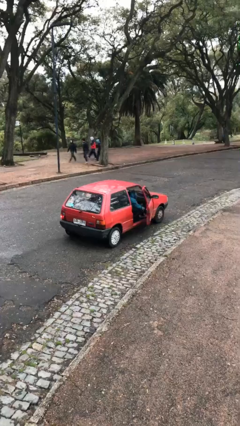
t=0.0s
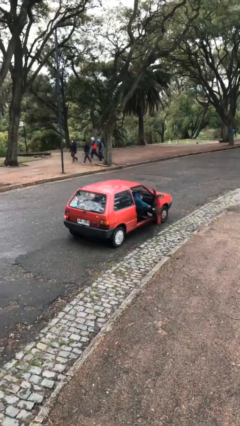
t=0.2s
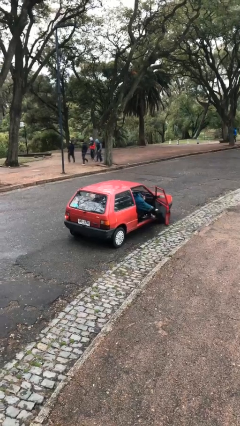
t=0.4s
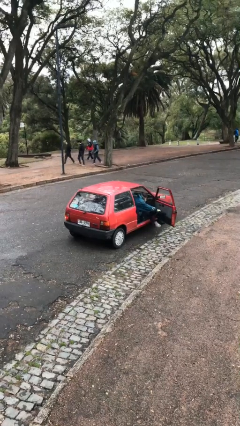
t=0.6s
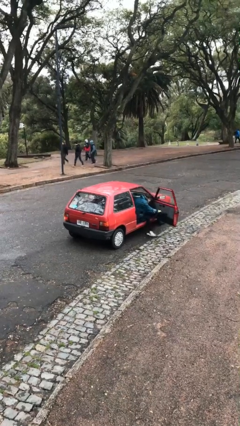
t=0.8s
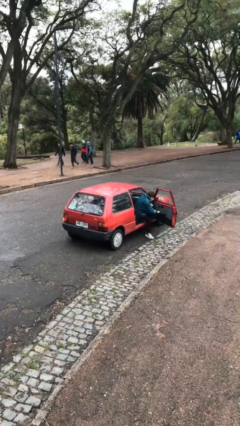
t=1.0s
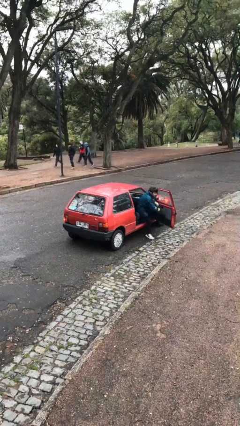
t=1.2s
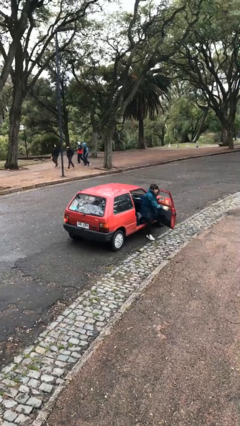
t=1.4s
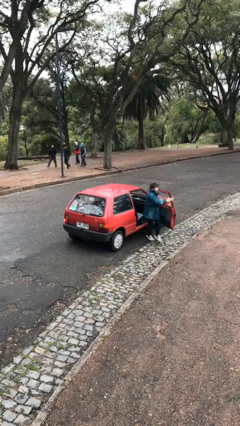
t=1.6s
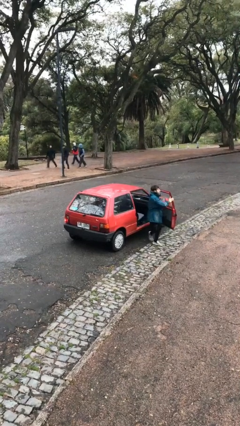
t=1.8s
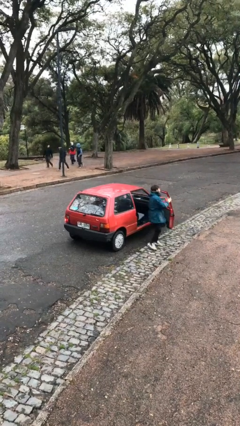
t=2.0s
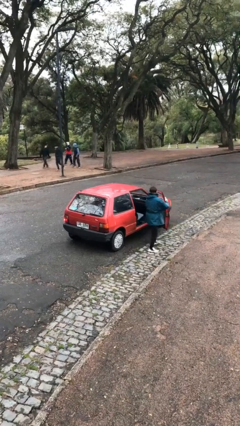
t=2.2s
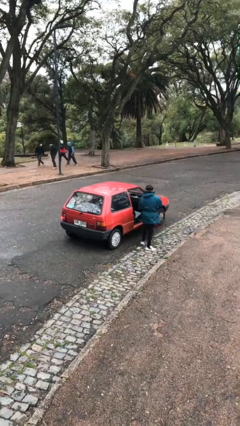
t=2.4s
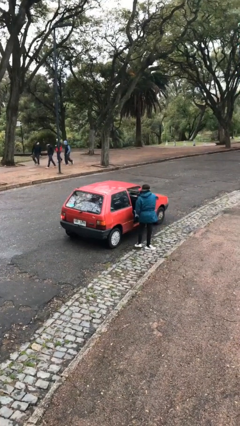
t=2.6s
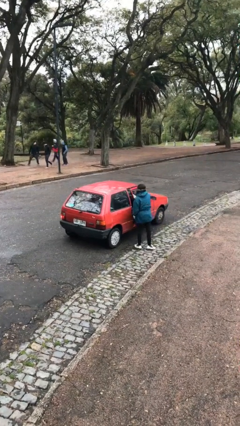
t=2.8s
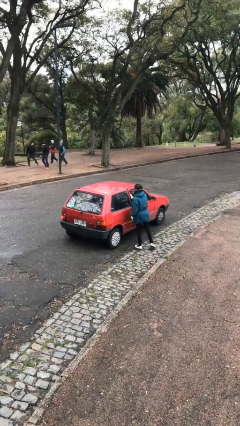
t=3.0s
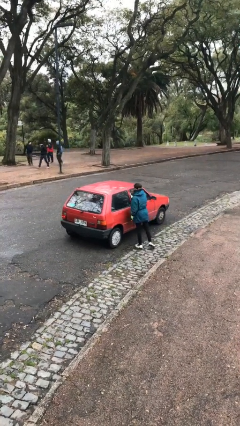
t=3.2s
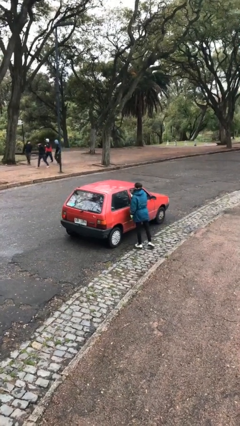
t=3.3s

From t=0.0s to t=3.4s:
car drops off person

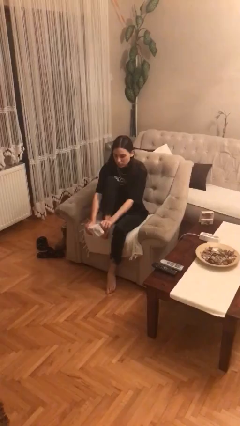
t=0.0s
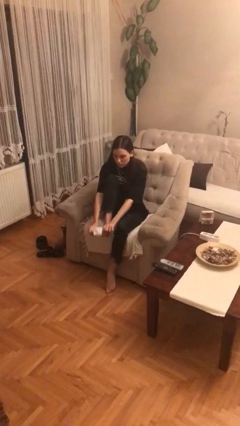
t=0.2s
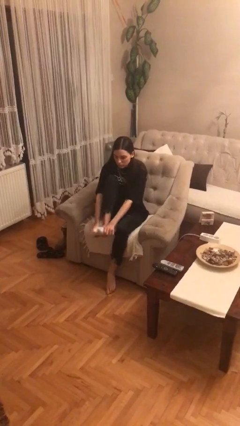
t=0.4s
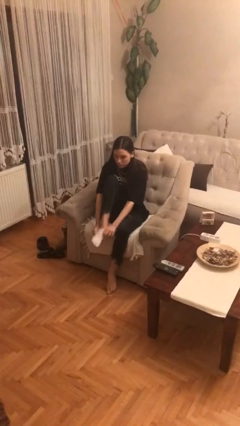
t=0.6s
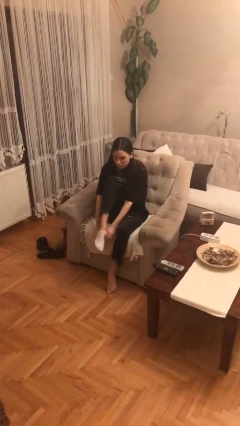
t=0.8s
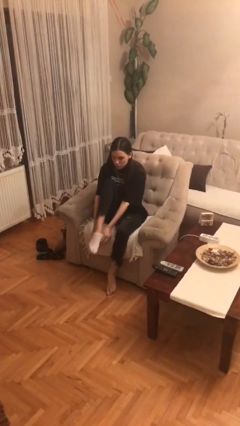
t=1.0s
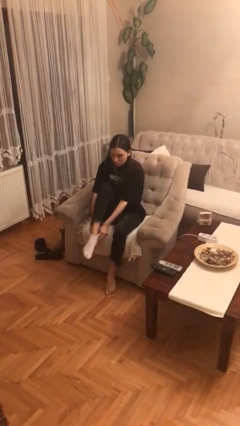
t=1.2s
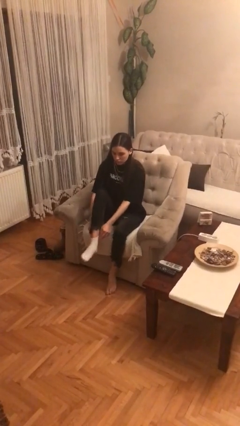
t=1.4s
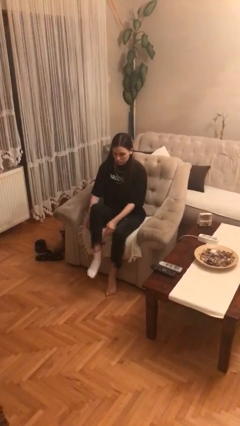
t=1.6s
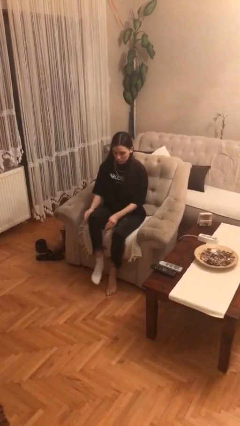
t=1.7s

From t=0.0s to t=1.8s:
person puts on socks

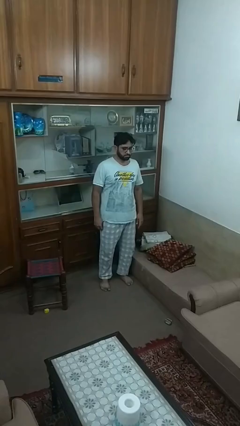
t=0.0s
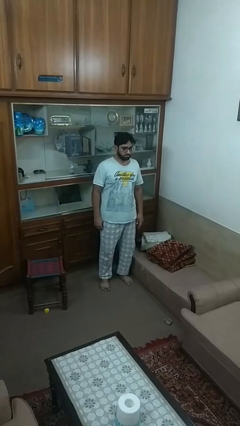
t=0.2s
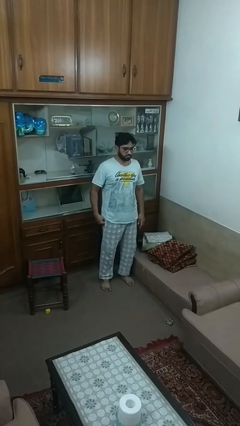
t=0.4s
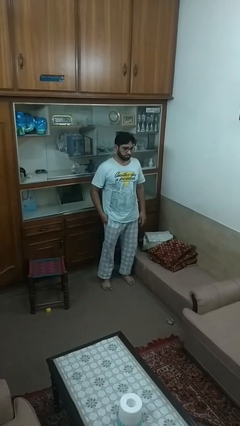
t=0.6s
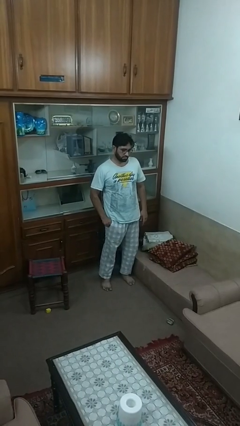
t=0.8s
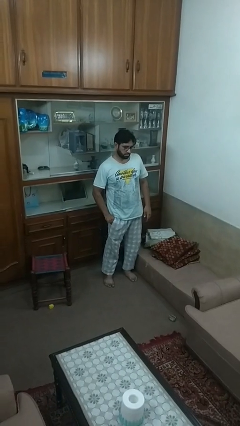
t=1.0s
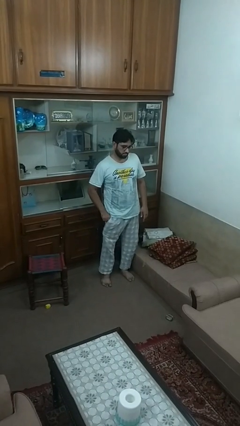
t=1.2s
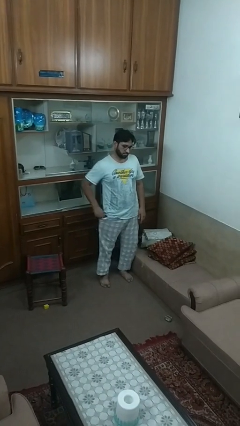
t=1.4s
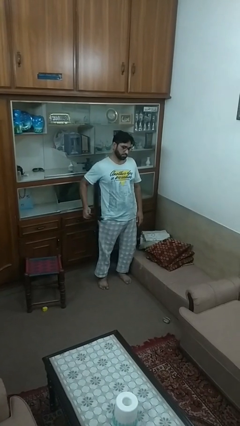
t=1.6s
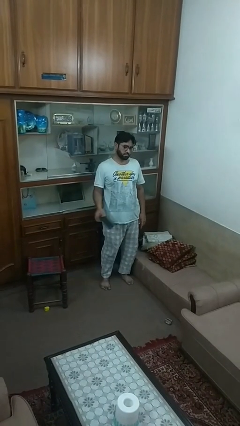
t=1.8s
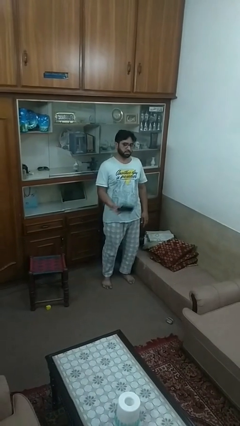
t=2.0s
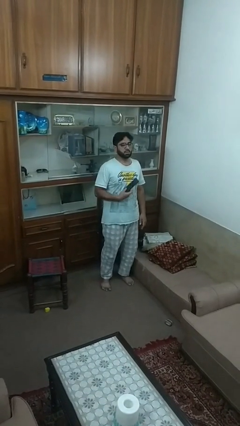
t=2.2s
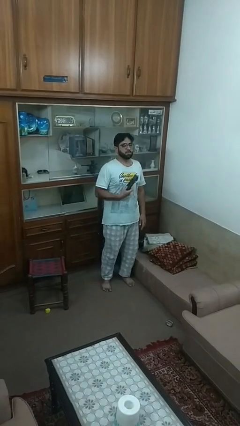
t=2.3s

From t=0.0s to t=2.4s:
person takes phone from pocket

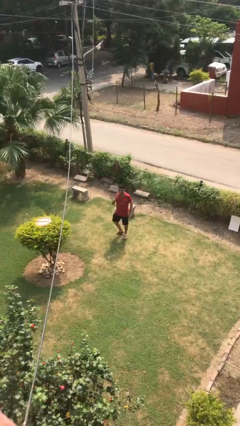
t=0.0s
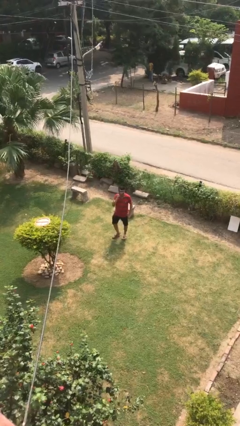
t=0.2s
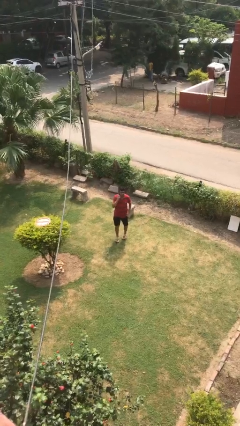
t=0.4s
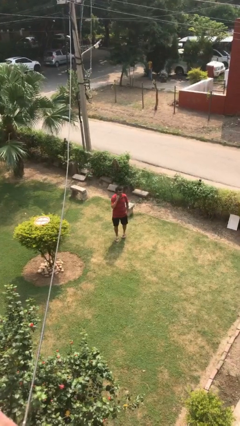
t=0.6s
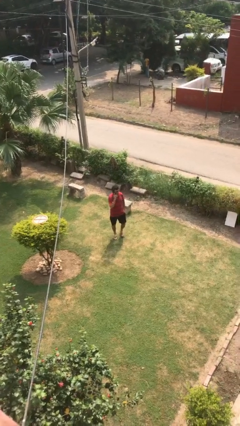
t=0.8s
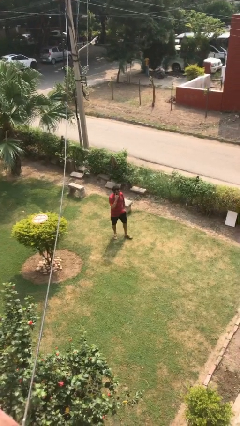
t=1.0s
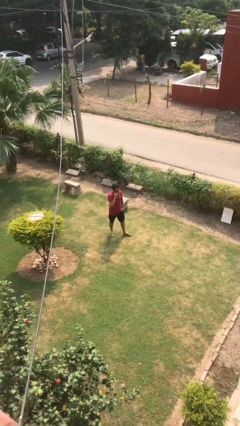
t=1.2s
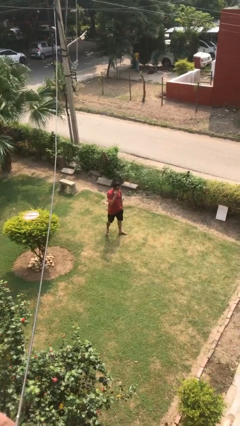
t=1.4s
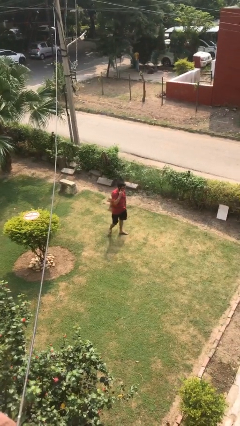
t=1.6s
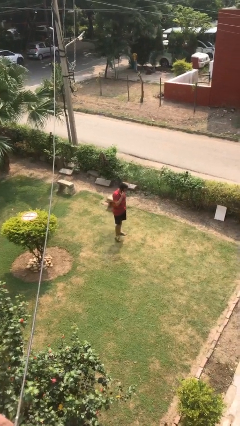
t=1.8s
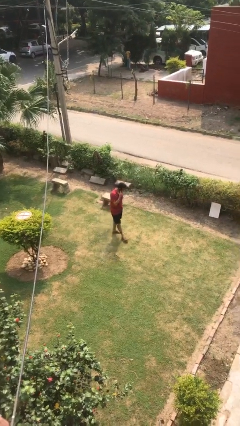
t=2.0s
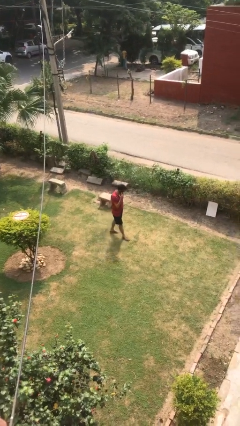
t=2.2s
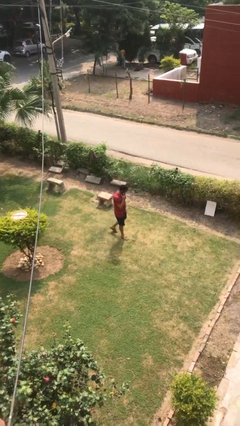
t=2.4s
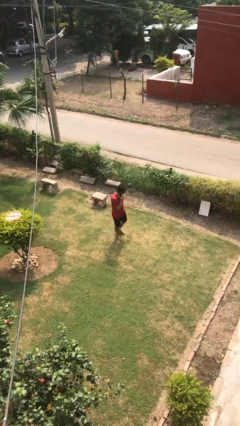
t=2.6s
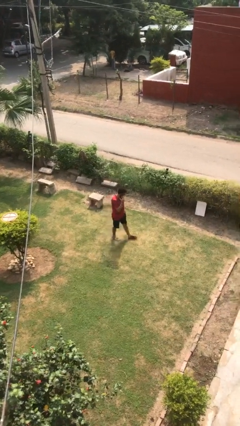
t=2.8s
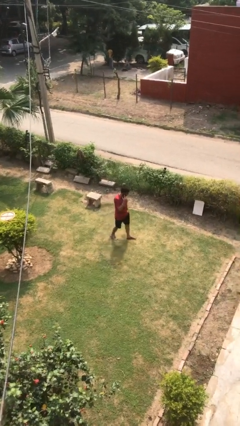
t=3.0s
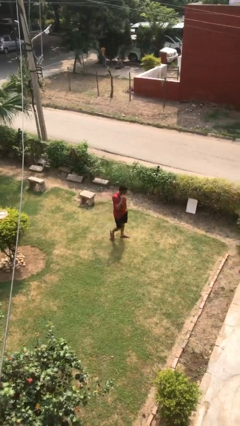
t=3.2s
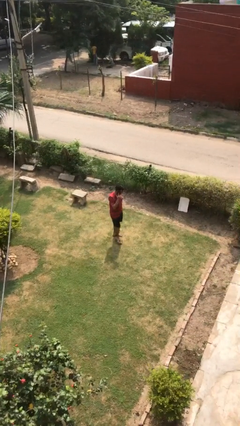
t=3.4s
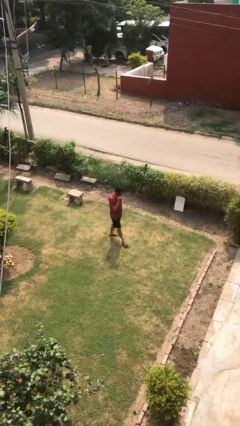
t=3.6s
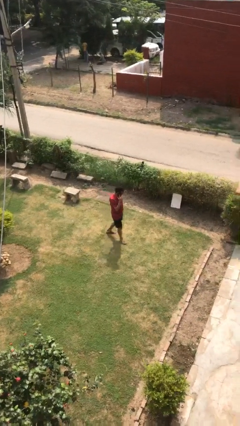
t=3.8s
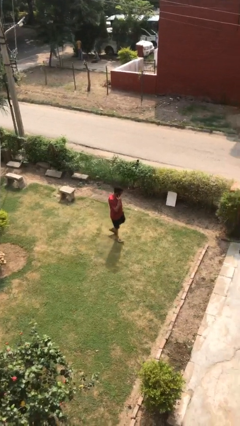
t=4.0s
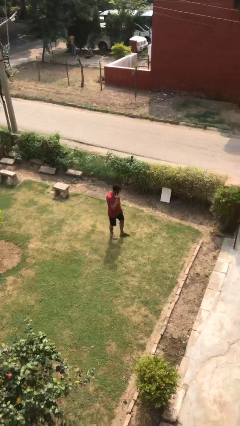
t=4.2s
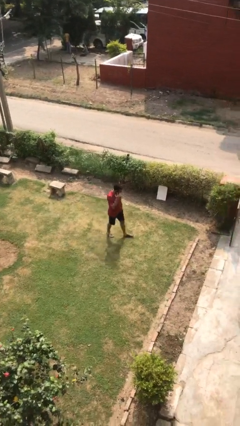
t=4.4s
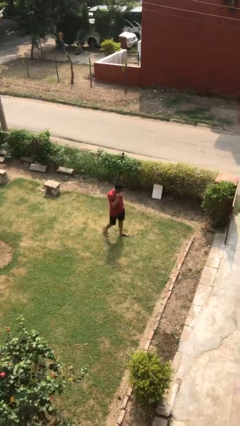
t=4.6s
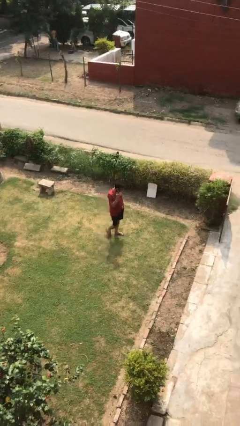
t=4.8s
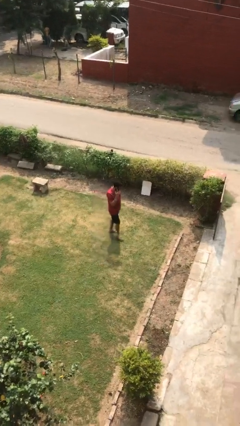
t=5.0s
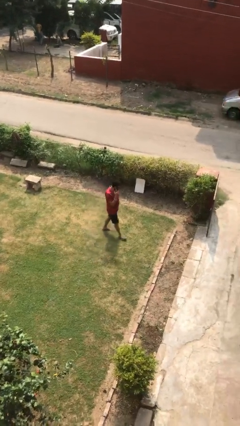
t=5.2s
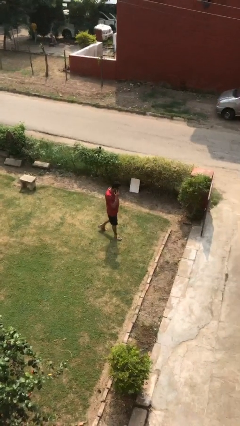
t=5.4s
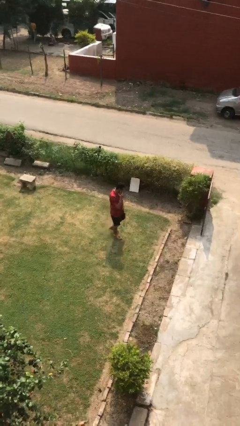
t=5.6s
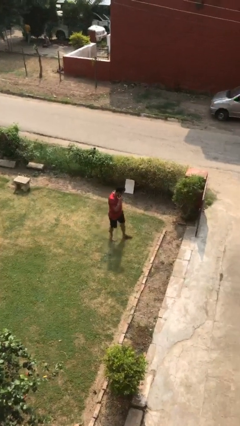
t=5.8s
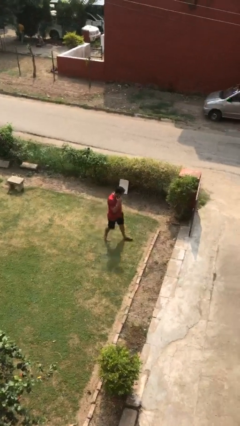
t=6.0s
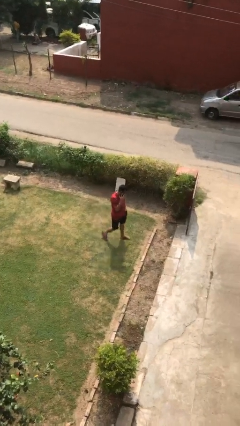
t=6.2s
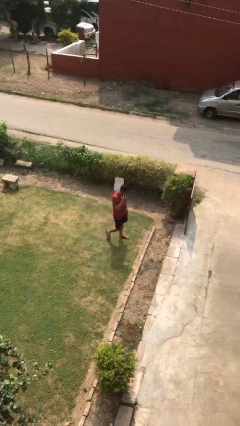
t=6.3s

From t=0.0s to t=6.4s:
person talks on phone

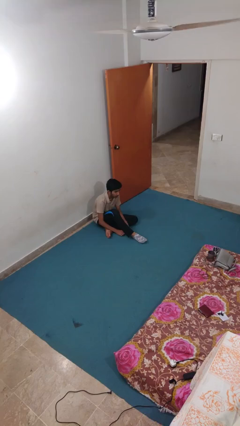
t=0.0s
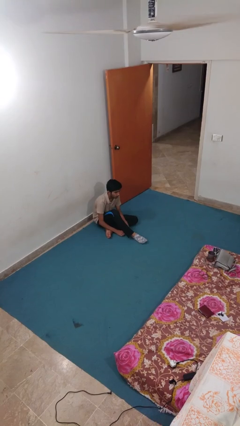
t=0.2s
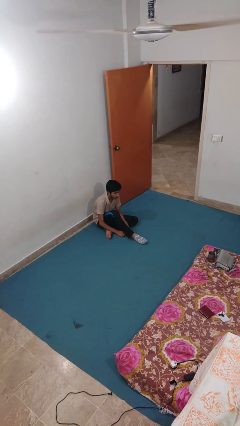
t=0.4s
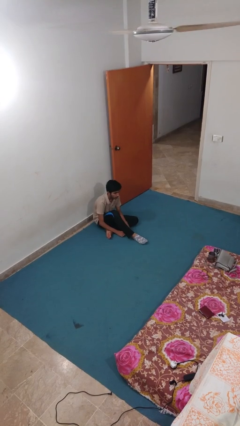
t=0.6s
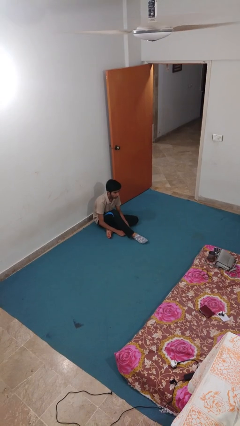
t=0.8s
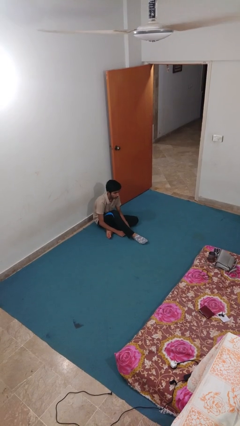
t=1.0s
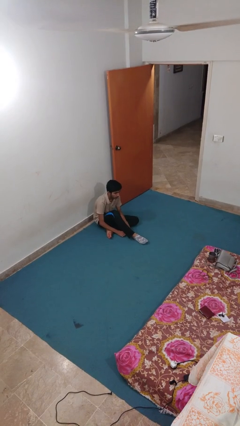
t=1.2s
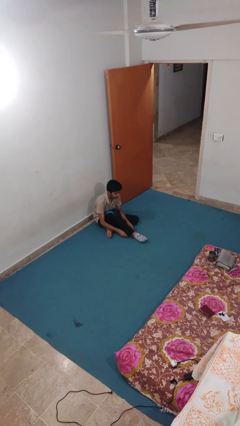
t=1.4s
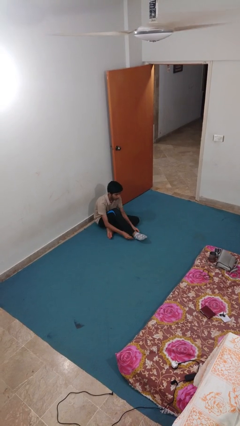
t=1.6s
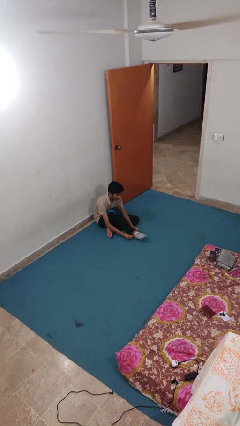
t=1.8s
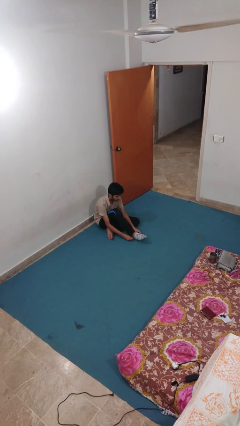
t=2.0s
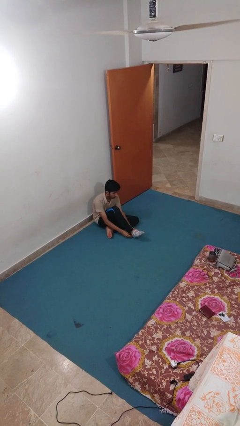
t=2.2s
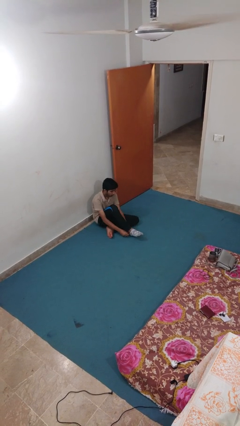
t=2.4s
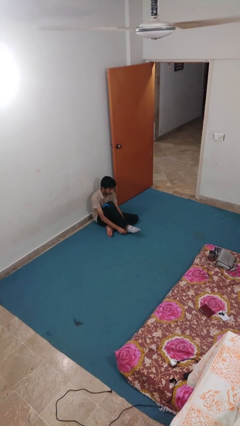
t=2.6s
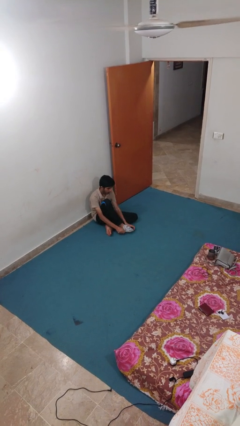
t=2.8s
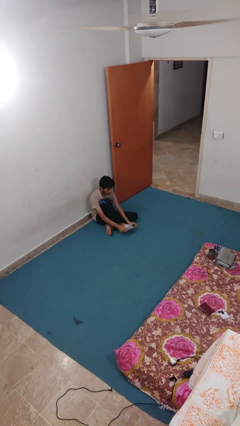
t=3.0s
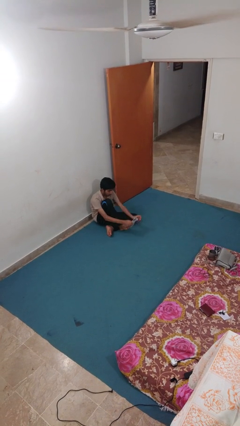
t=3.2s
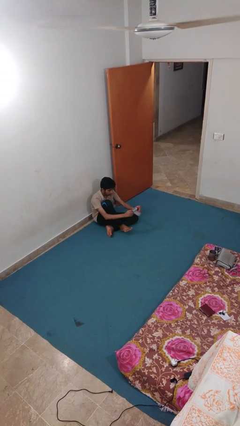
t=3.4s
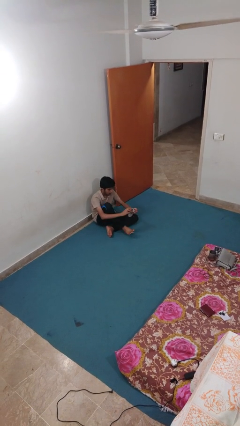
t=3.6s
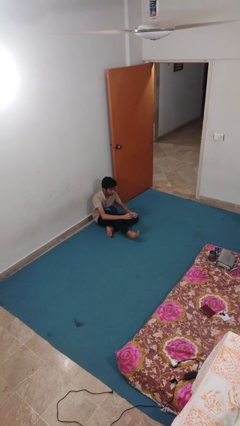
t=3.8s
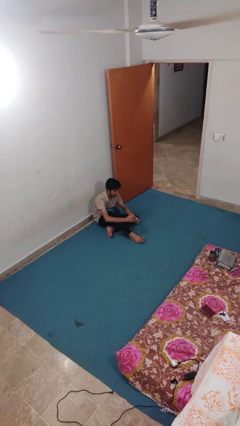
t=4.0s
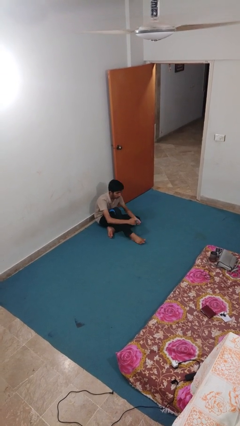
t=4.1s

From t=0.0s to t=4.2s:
person takes off socks
